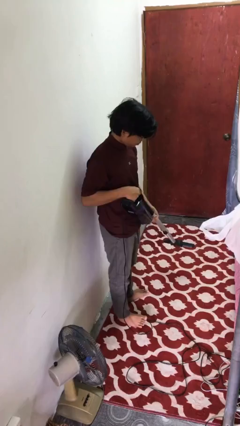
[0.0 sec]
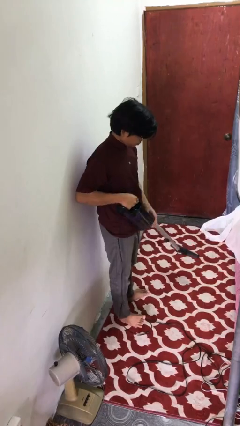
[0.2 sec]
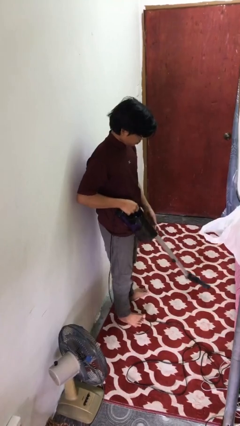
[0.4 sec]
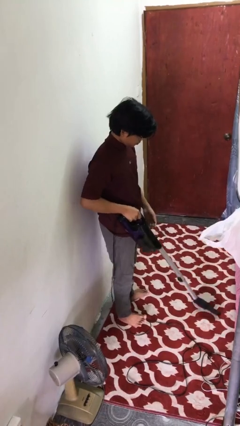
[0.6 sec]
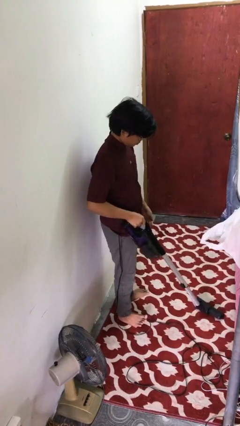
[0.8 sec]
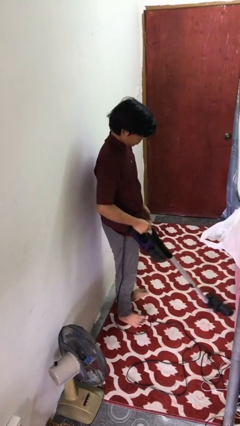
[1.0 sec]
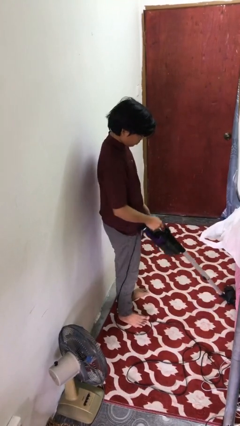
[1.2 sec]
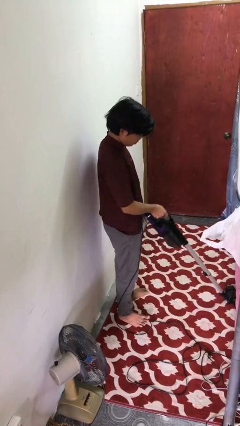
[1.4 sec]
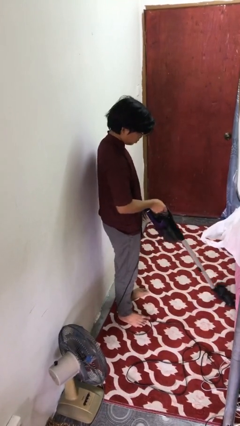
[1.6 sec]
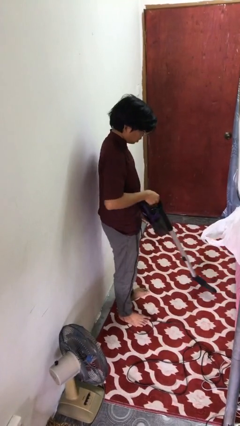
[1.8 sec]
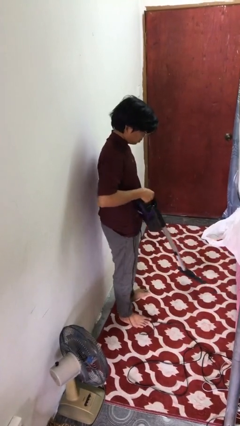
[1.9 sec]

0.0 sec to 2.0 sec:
person vacuums carpet

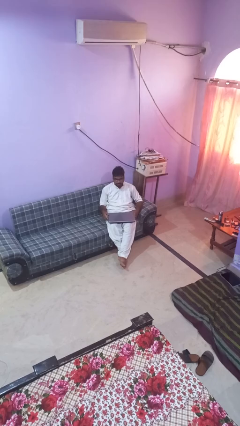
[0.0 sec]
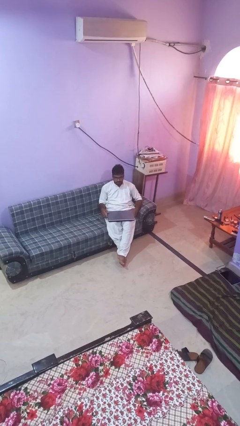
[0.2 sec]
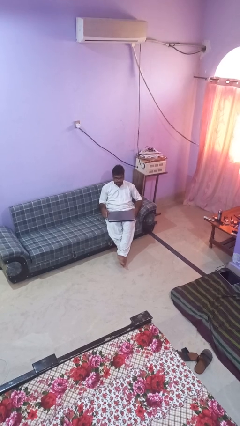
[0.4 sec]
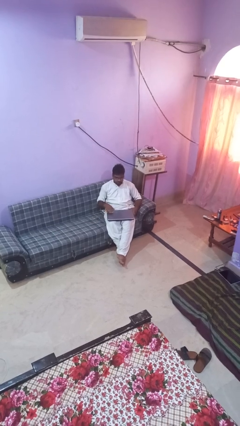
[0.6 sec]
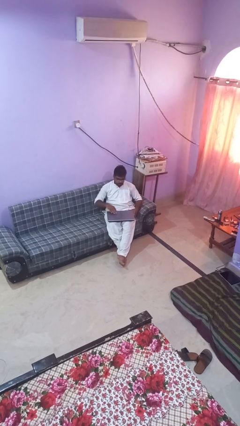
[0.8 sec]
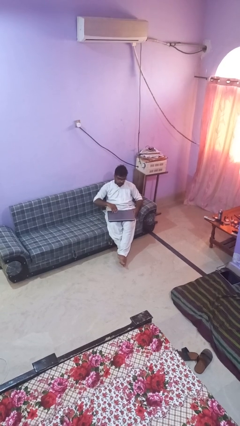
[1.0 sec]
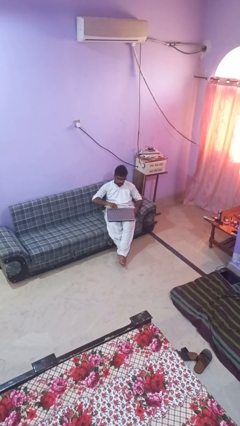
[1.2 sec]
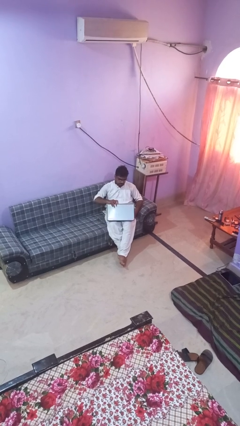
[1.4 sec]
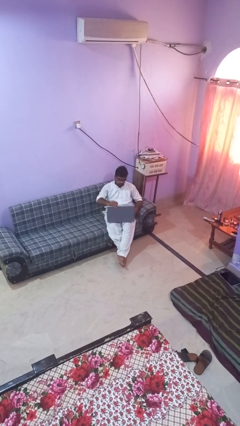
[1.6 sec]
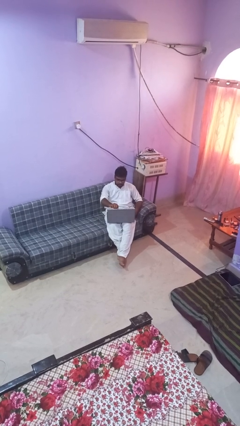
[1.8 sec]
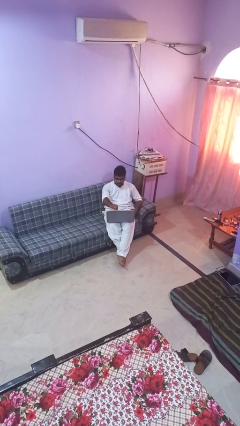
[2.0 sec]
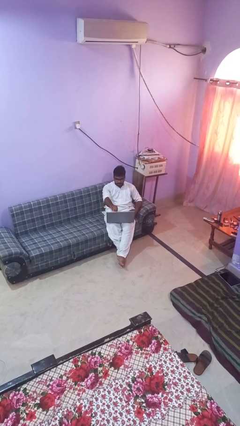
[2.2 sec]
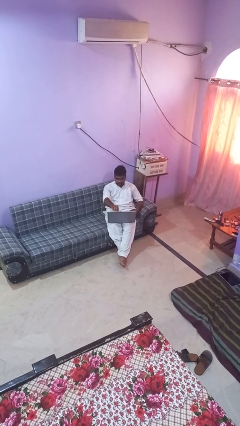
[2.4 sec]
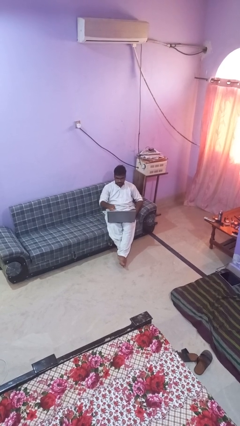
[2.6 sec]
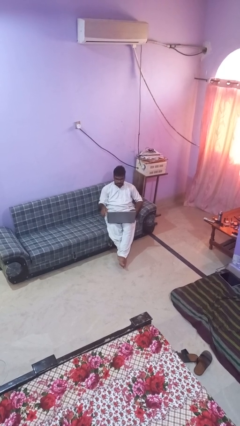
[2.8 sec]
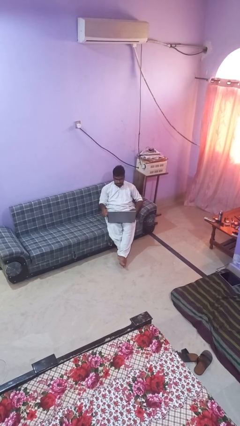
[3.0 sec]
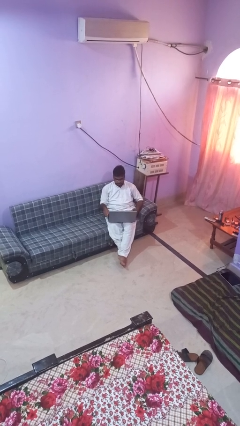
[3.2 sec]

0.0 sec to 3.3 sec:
person opens laptop

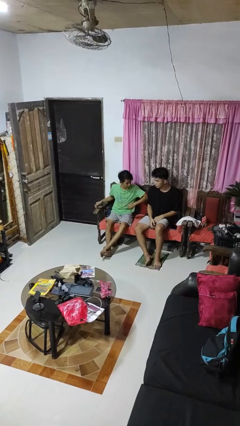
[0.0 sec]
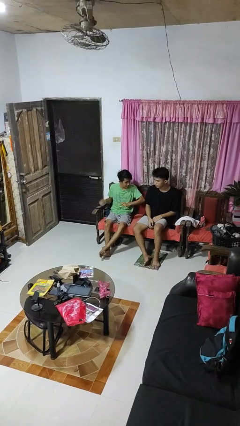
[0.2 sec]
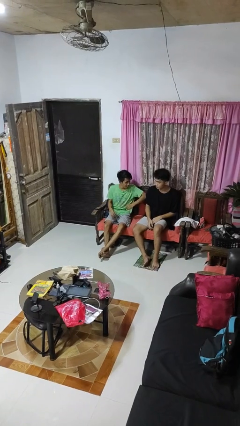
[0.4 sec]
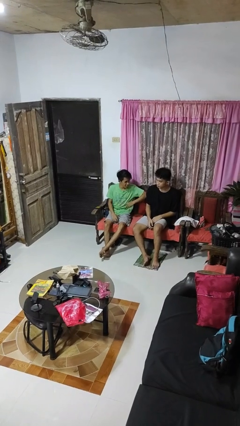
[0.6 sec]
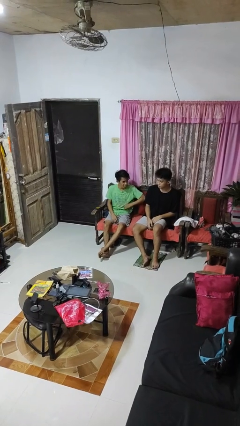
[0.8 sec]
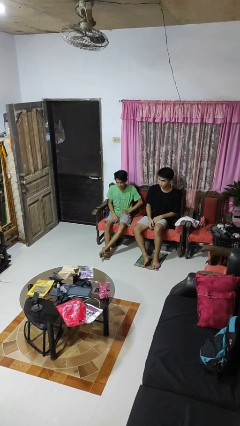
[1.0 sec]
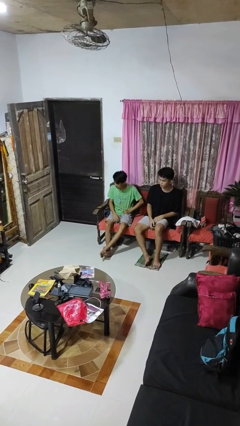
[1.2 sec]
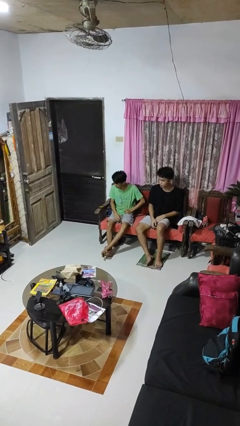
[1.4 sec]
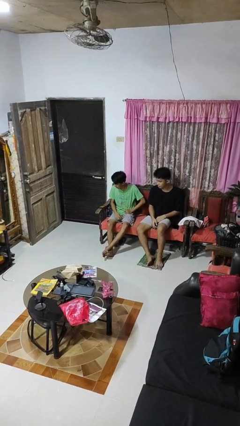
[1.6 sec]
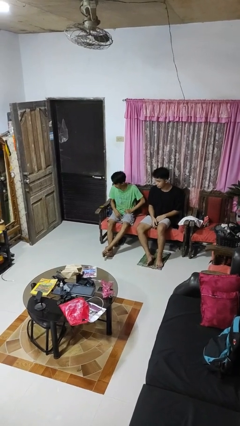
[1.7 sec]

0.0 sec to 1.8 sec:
person nudges person with elbow

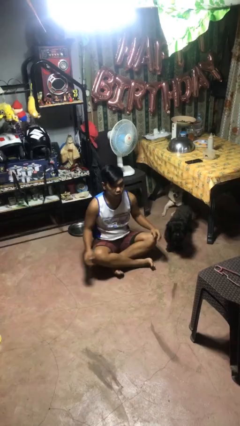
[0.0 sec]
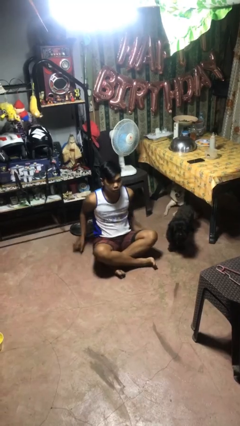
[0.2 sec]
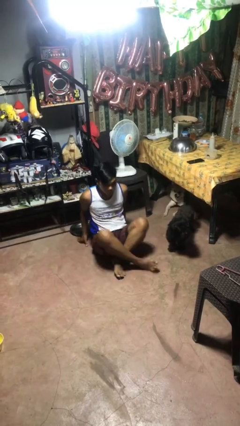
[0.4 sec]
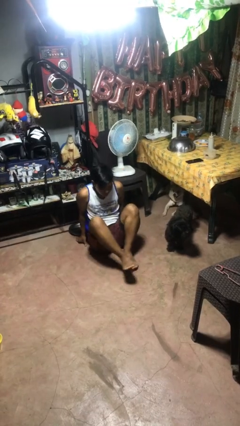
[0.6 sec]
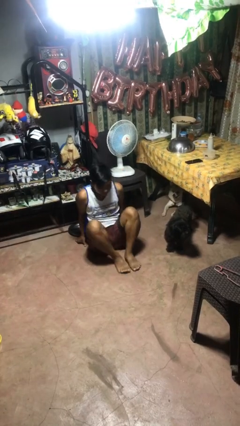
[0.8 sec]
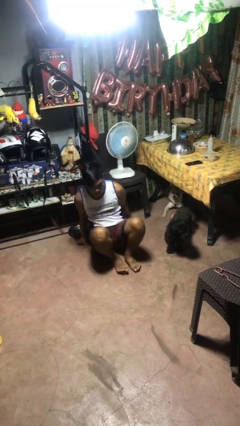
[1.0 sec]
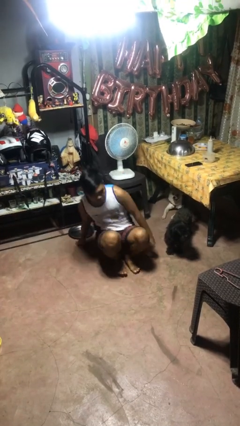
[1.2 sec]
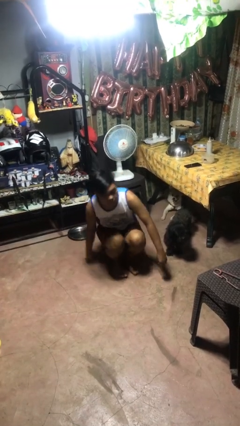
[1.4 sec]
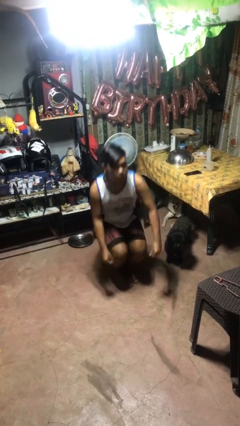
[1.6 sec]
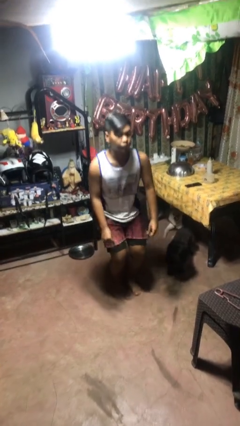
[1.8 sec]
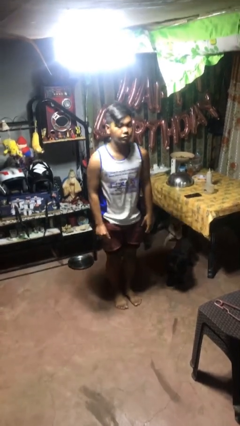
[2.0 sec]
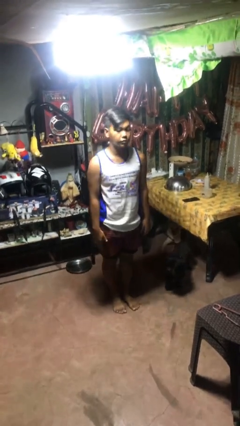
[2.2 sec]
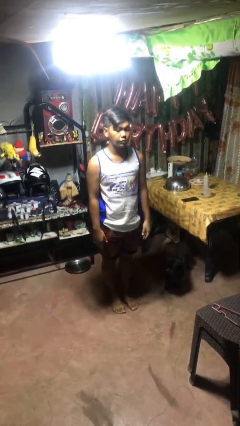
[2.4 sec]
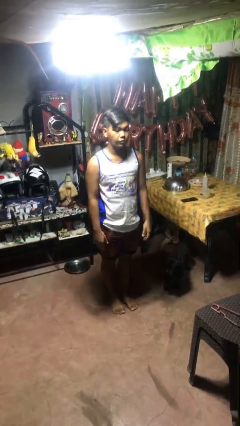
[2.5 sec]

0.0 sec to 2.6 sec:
person stands up from floor

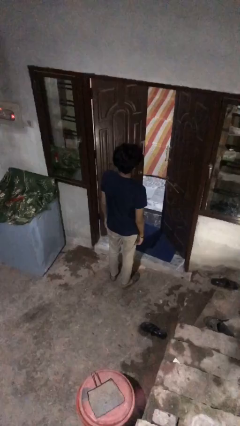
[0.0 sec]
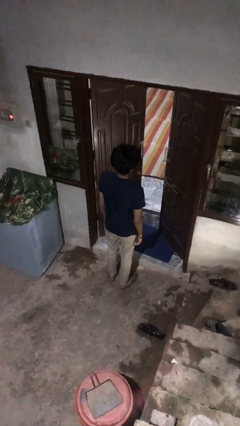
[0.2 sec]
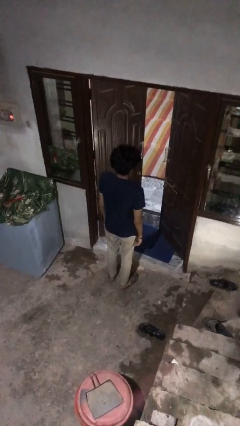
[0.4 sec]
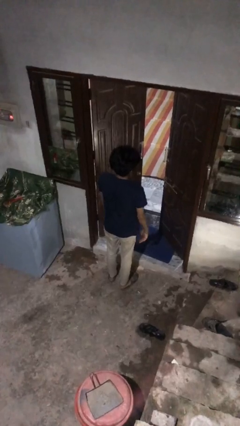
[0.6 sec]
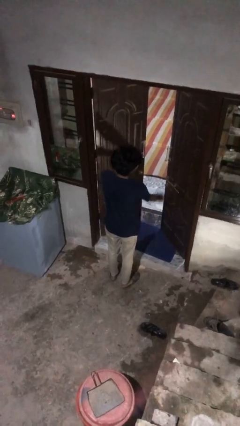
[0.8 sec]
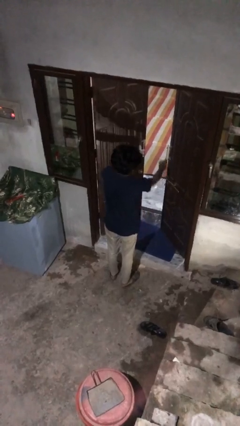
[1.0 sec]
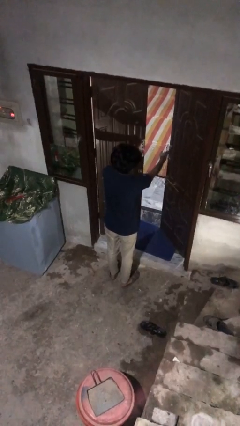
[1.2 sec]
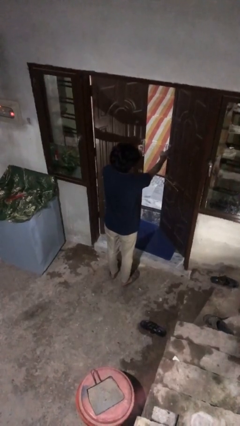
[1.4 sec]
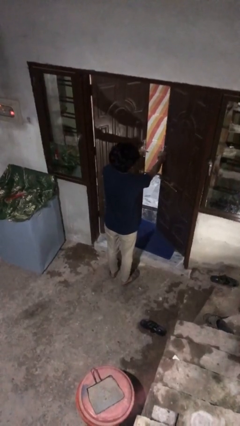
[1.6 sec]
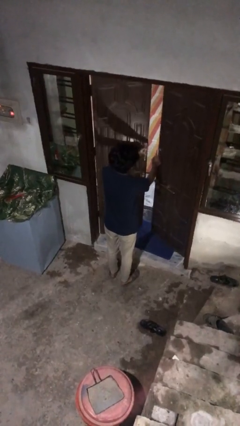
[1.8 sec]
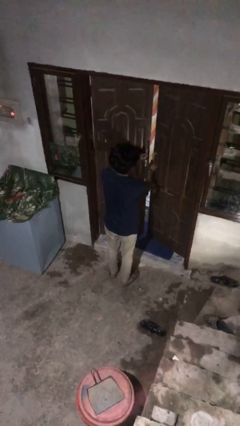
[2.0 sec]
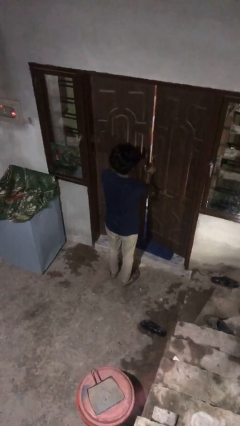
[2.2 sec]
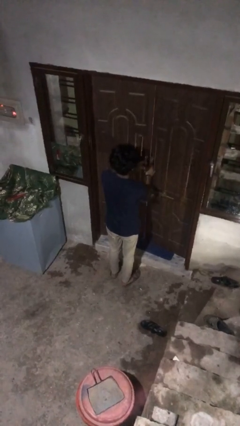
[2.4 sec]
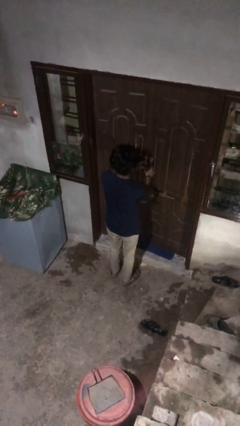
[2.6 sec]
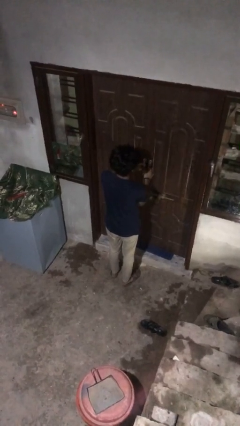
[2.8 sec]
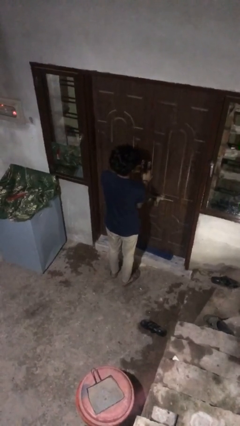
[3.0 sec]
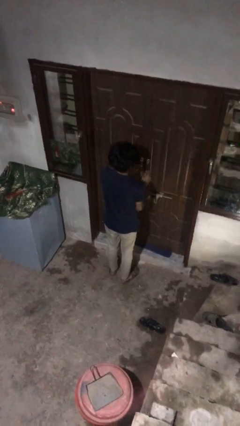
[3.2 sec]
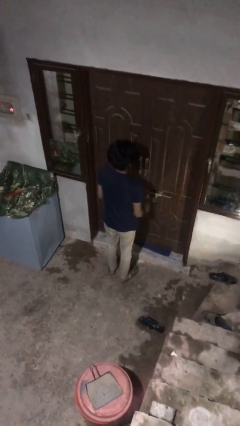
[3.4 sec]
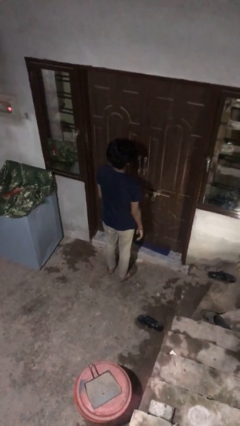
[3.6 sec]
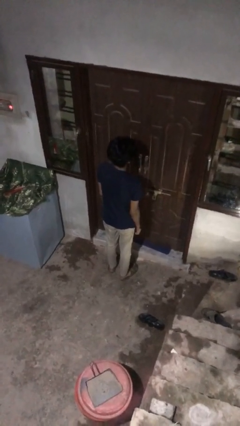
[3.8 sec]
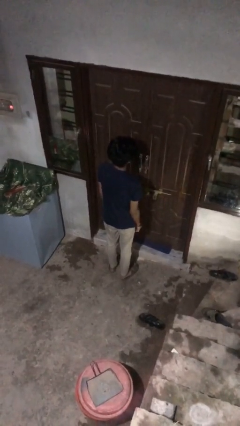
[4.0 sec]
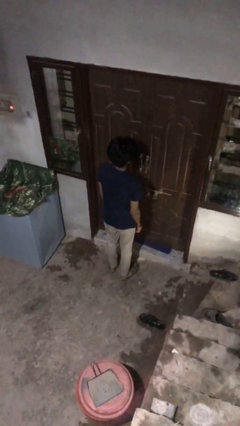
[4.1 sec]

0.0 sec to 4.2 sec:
person closes facility door

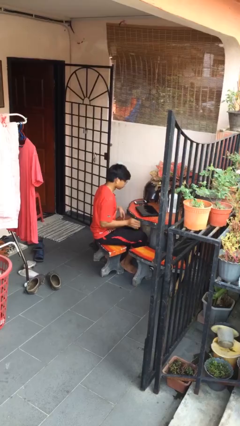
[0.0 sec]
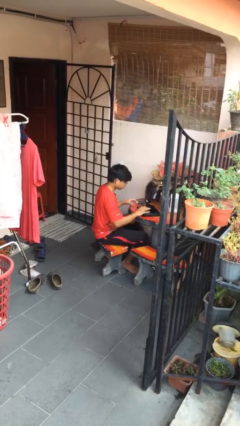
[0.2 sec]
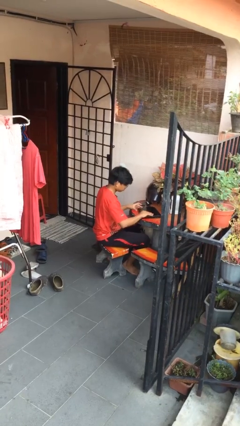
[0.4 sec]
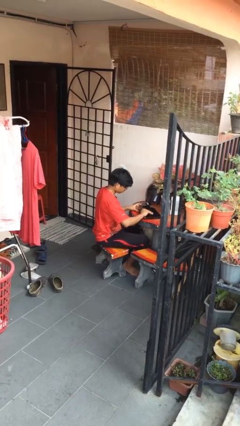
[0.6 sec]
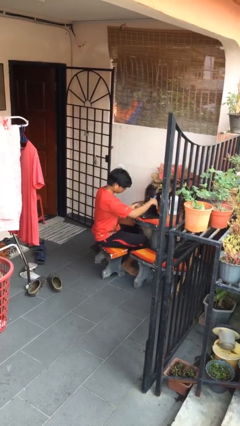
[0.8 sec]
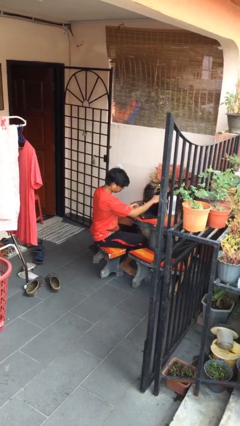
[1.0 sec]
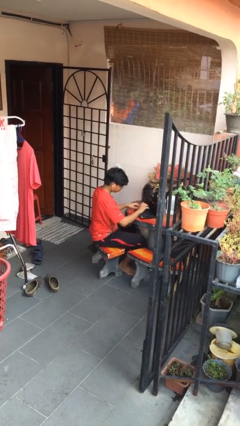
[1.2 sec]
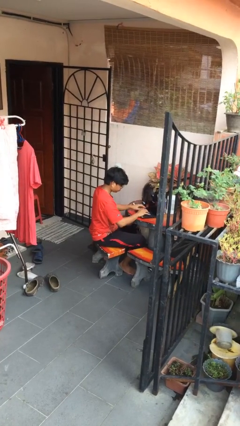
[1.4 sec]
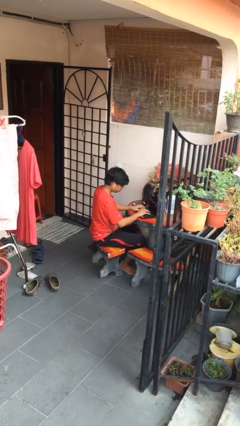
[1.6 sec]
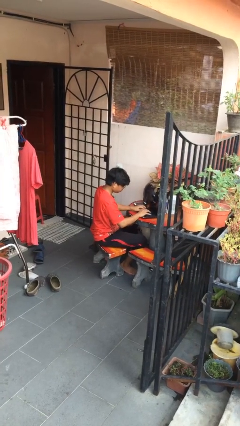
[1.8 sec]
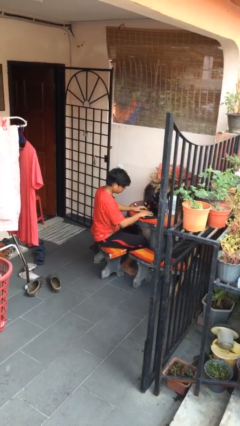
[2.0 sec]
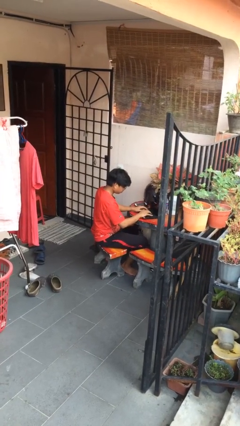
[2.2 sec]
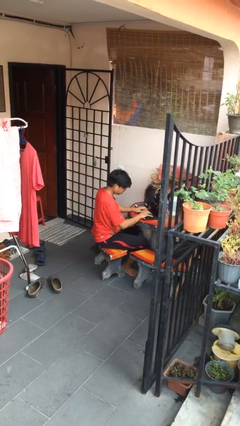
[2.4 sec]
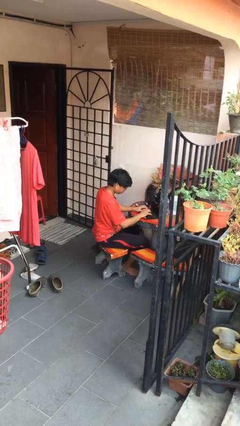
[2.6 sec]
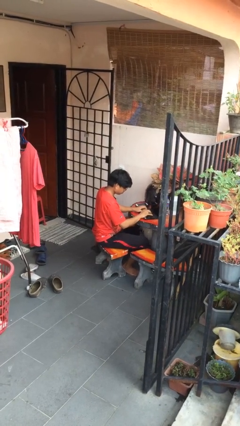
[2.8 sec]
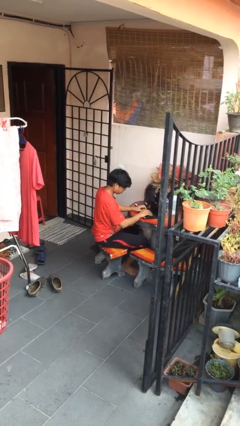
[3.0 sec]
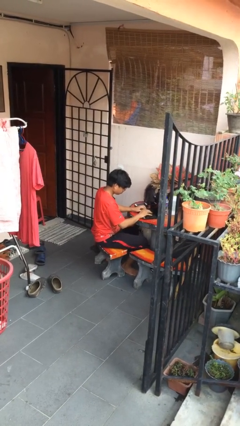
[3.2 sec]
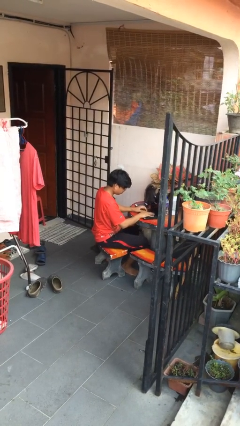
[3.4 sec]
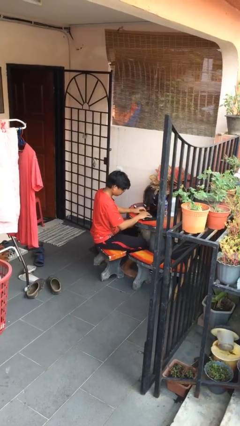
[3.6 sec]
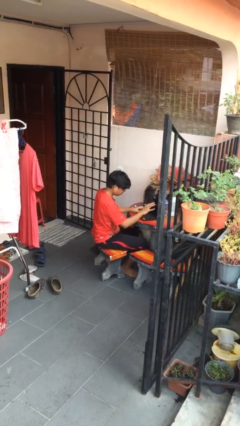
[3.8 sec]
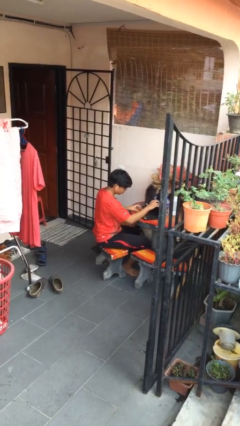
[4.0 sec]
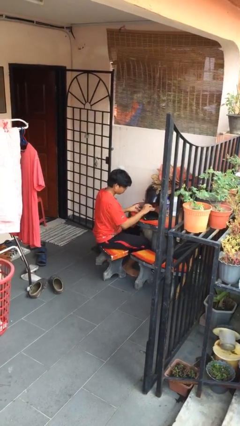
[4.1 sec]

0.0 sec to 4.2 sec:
person interacts with laptop
